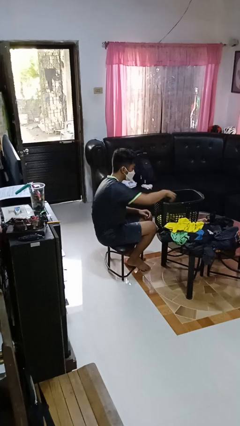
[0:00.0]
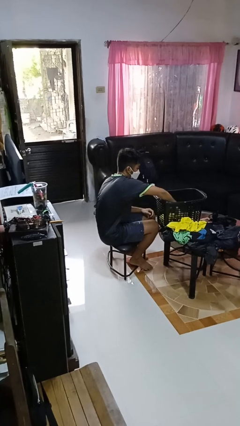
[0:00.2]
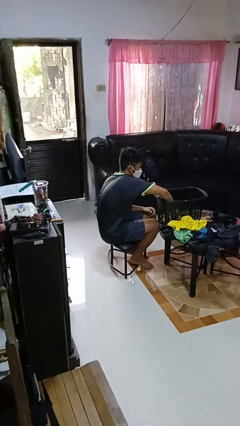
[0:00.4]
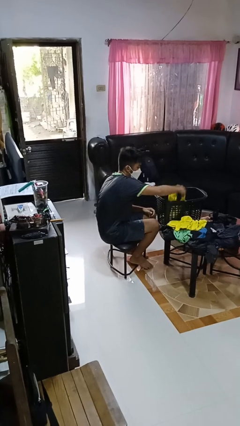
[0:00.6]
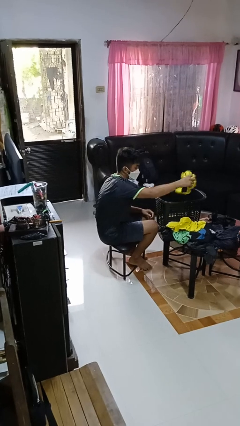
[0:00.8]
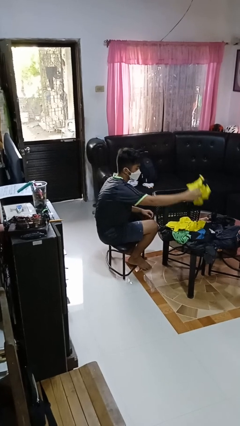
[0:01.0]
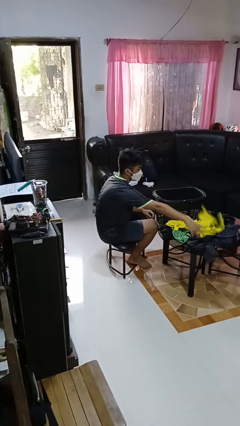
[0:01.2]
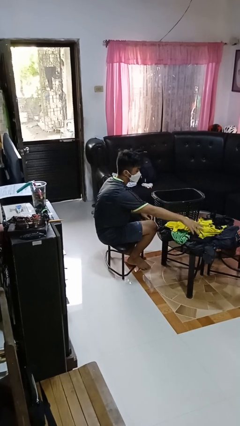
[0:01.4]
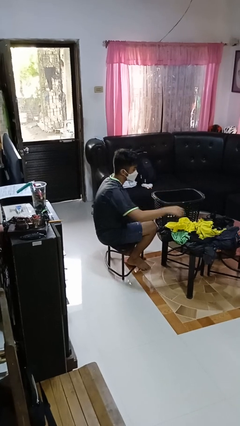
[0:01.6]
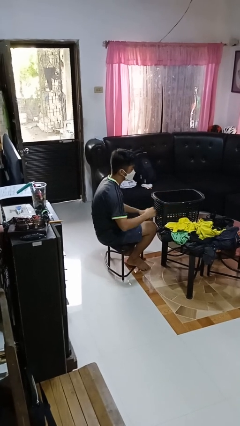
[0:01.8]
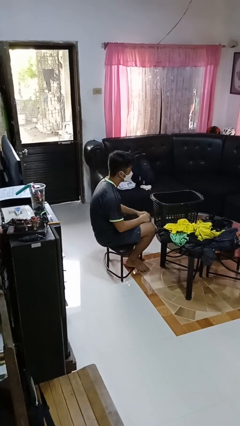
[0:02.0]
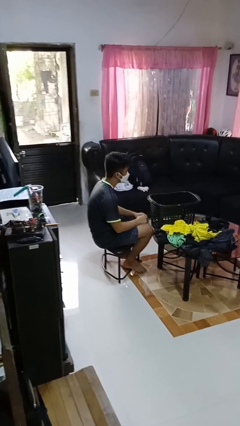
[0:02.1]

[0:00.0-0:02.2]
person takes object from basket

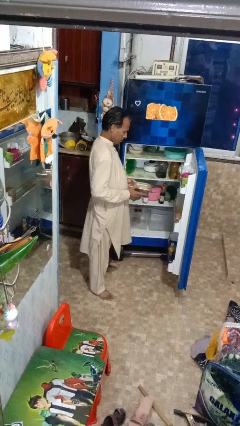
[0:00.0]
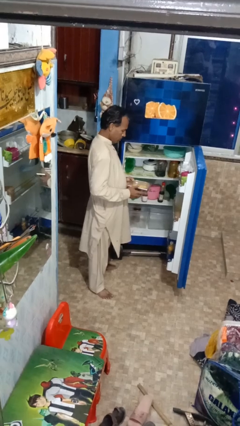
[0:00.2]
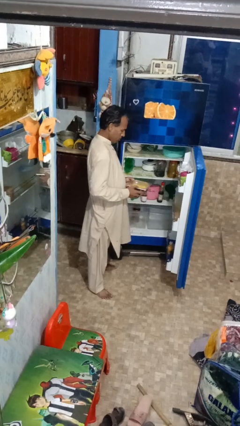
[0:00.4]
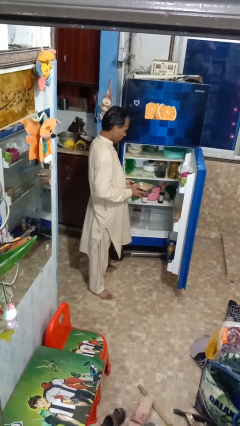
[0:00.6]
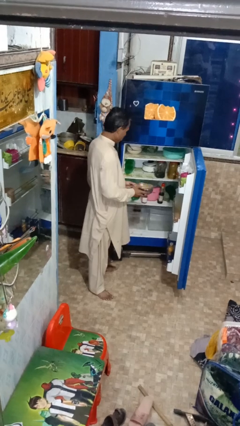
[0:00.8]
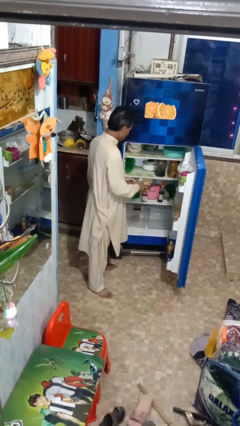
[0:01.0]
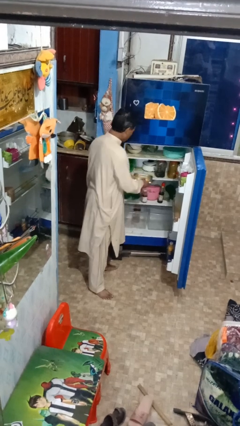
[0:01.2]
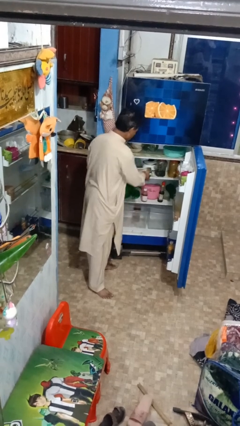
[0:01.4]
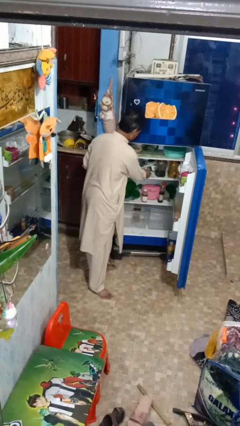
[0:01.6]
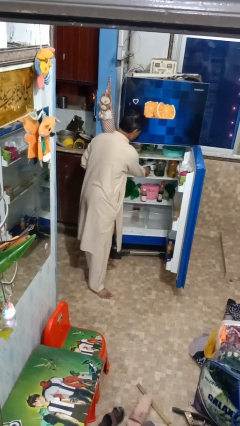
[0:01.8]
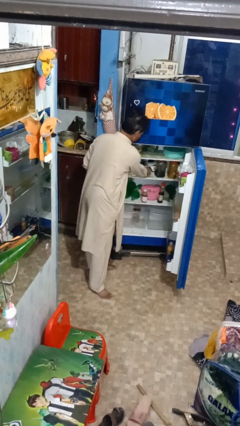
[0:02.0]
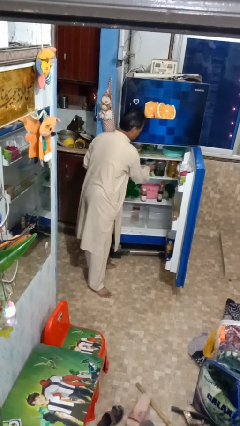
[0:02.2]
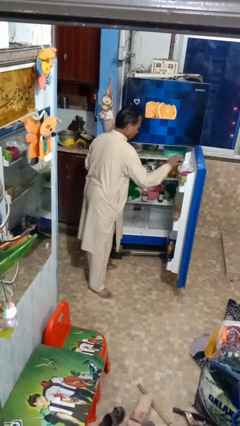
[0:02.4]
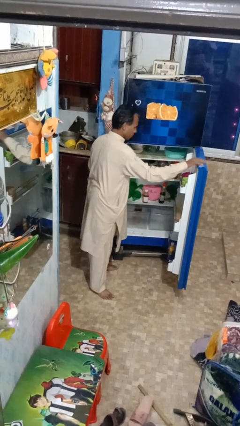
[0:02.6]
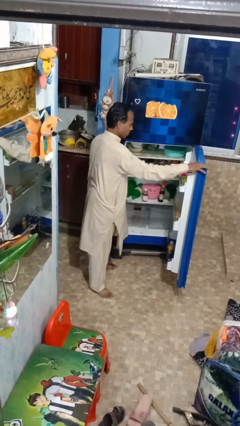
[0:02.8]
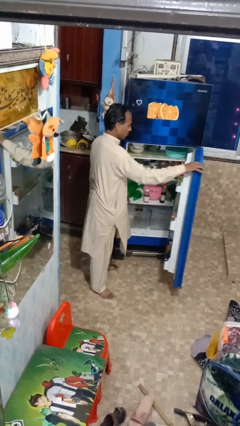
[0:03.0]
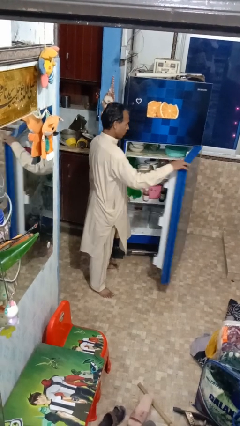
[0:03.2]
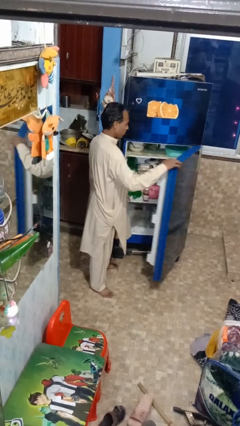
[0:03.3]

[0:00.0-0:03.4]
person takes object from refrigerator

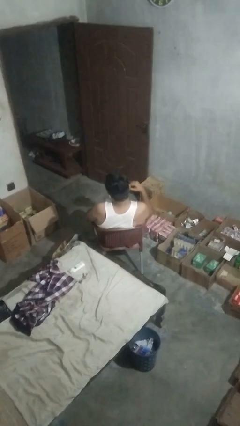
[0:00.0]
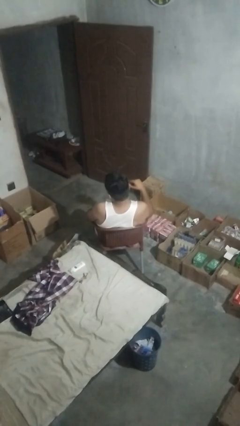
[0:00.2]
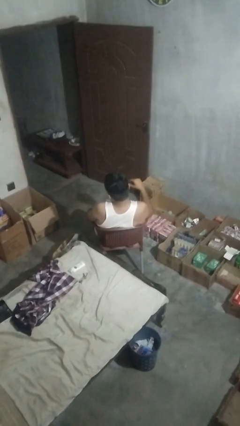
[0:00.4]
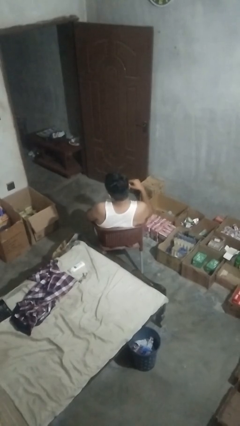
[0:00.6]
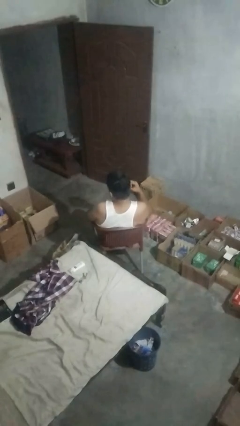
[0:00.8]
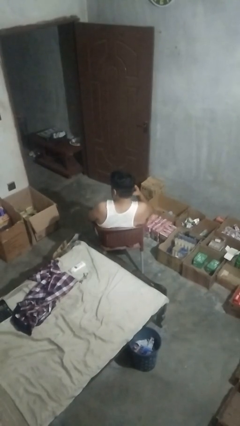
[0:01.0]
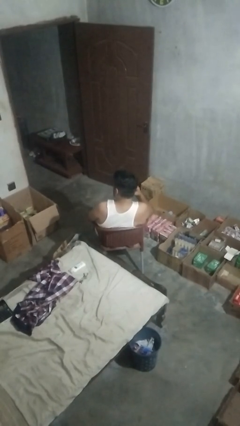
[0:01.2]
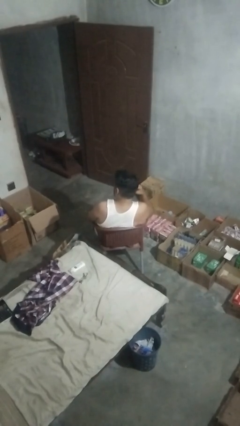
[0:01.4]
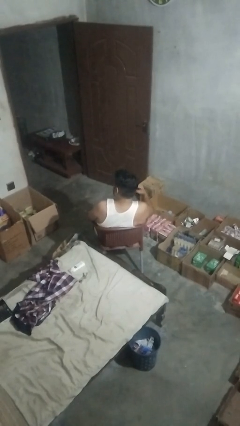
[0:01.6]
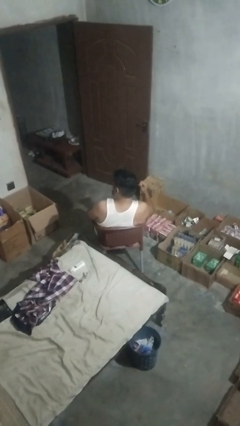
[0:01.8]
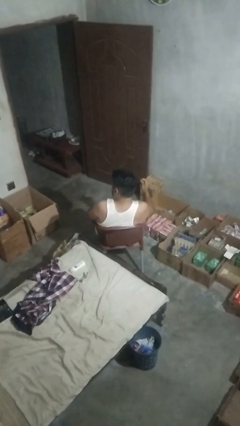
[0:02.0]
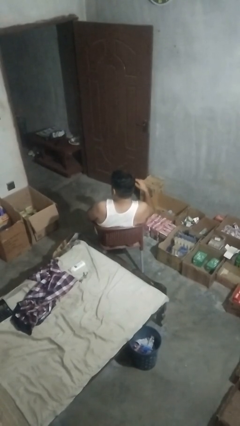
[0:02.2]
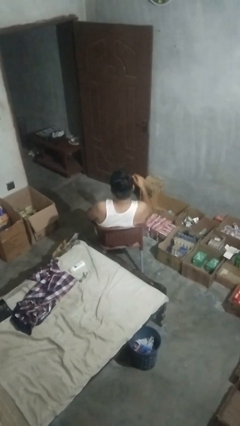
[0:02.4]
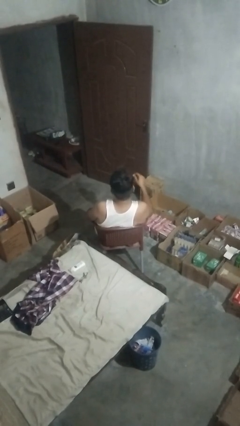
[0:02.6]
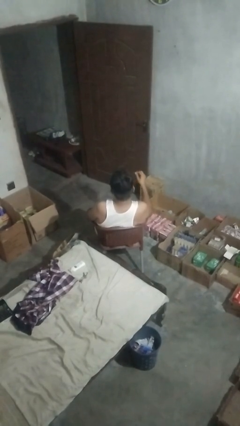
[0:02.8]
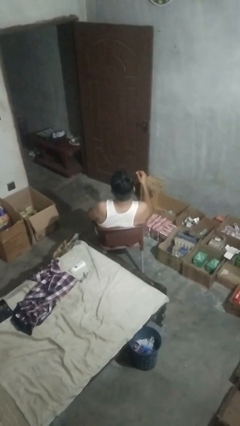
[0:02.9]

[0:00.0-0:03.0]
person takes off earrings

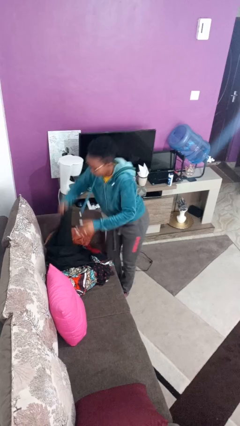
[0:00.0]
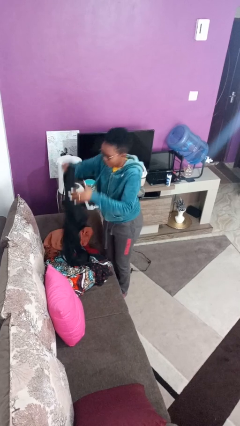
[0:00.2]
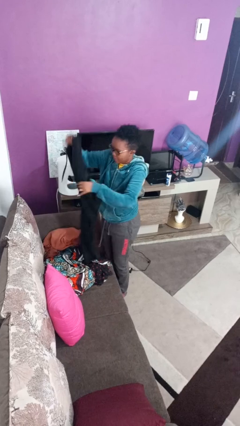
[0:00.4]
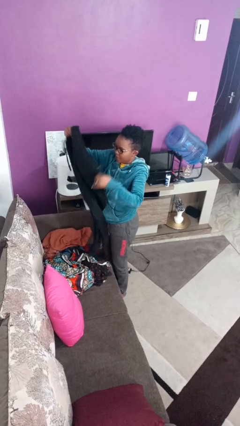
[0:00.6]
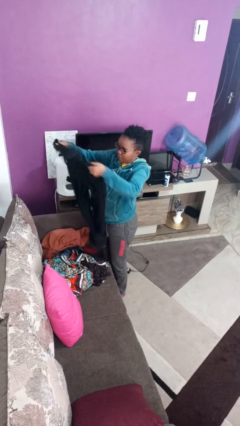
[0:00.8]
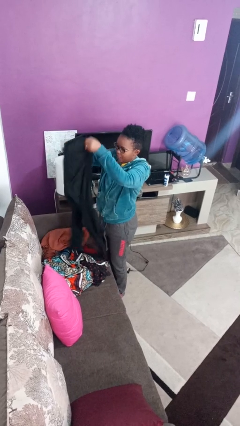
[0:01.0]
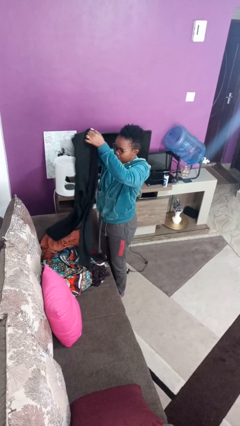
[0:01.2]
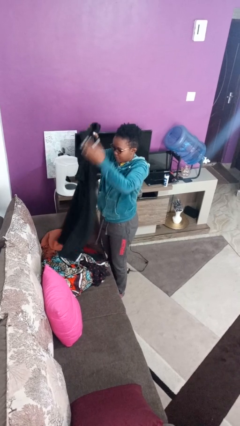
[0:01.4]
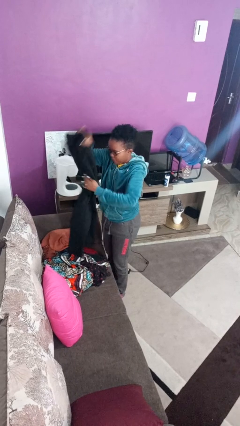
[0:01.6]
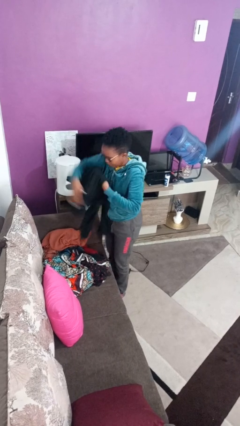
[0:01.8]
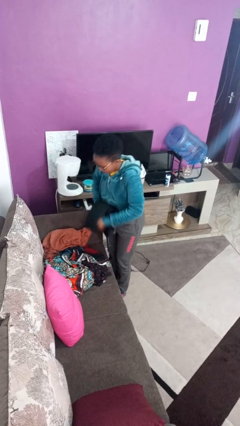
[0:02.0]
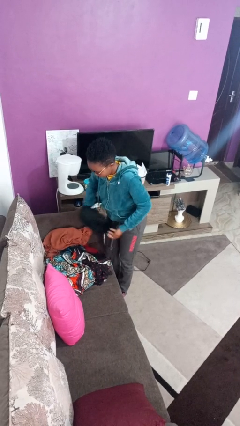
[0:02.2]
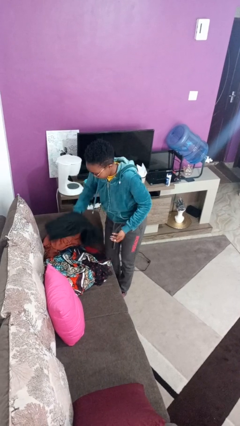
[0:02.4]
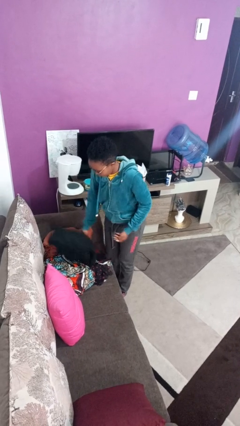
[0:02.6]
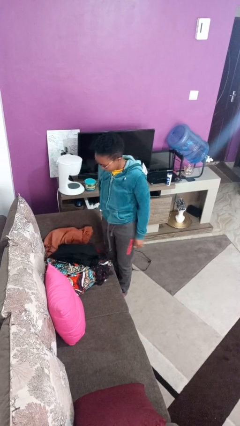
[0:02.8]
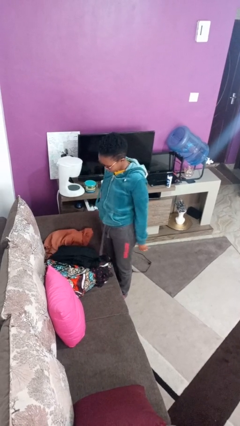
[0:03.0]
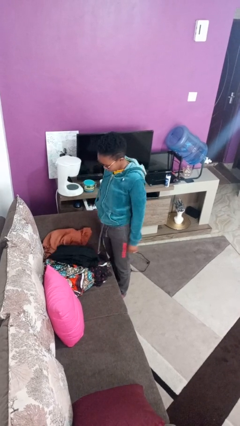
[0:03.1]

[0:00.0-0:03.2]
person folds pants

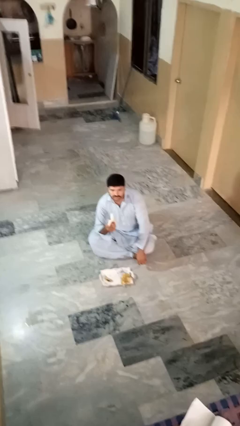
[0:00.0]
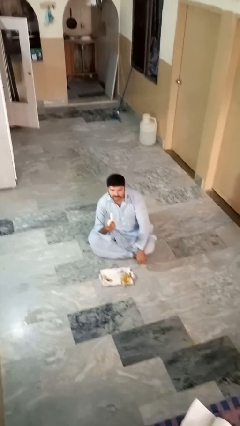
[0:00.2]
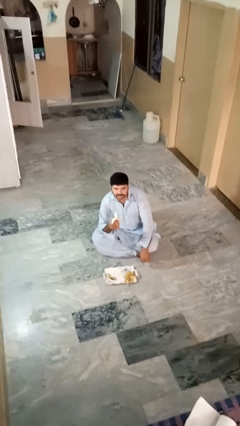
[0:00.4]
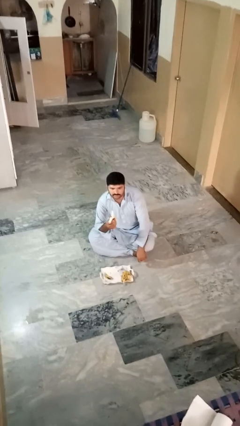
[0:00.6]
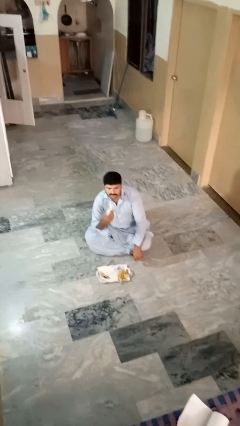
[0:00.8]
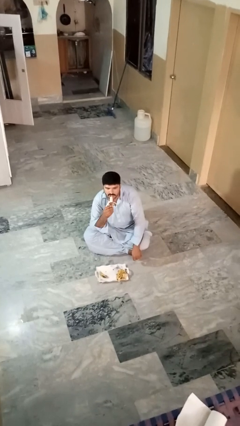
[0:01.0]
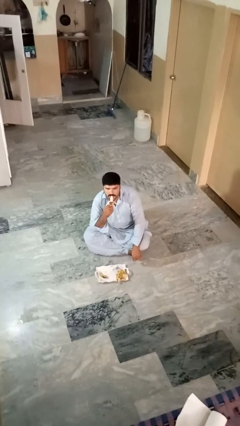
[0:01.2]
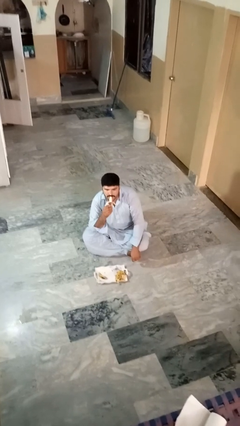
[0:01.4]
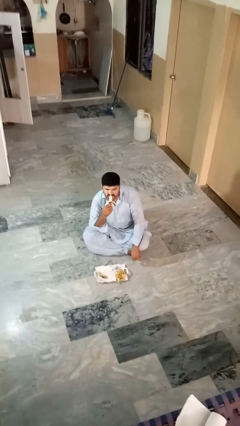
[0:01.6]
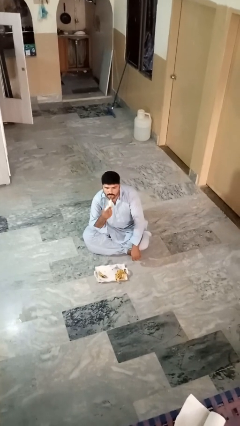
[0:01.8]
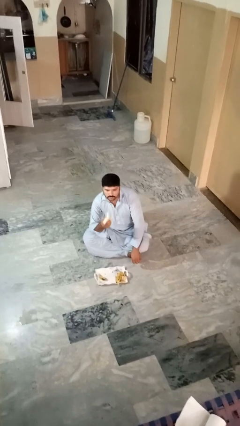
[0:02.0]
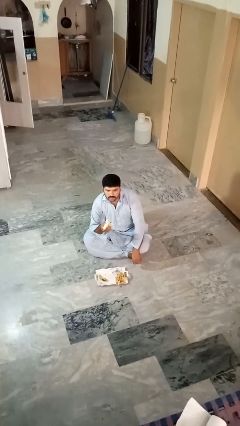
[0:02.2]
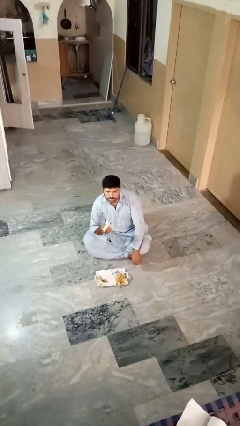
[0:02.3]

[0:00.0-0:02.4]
person eats banana

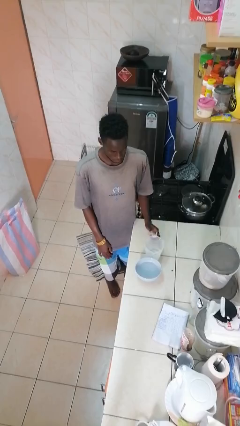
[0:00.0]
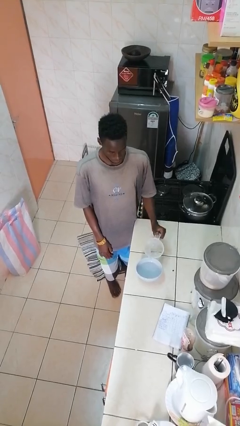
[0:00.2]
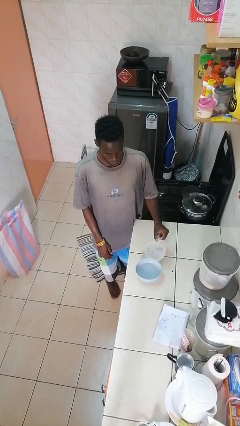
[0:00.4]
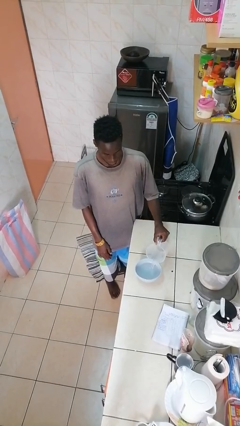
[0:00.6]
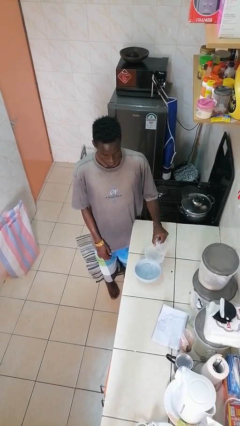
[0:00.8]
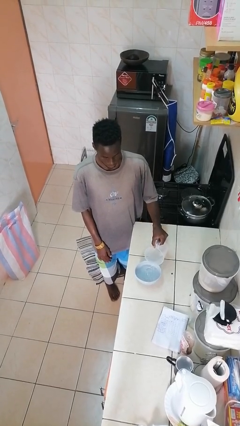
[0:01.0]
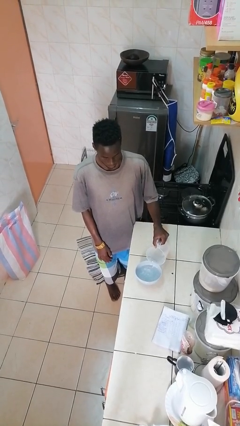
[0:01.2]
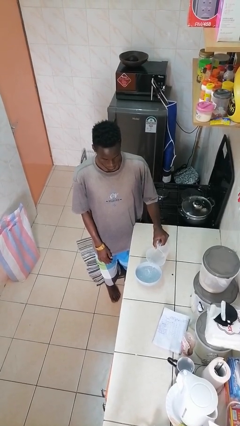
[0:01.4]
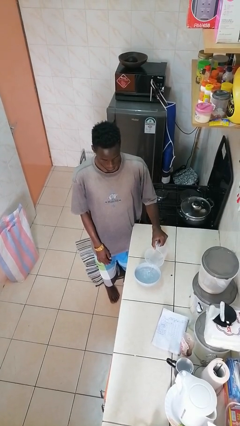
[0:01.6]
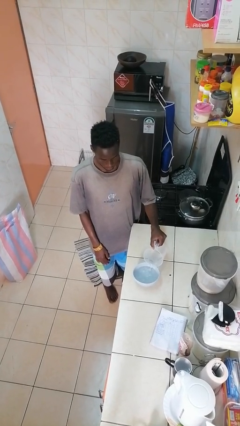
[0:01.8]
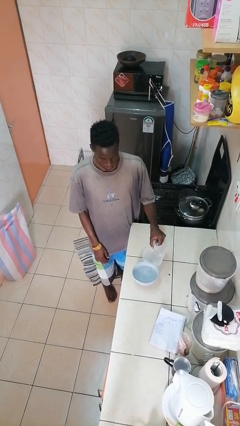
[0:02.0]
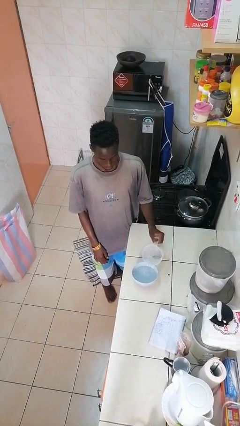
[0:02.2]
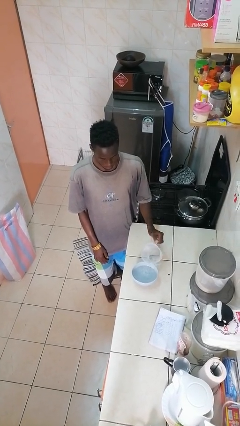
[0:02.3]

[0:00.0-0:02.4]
person pours into bowl

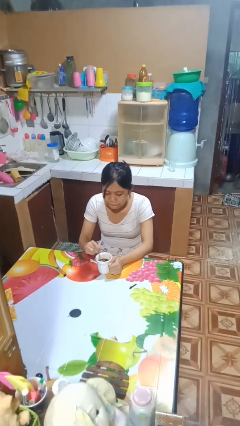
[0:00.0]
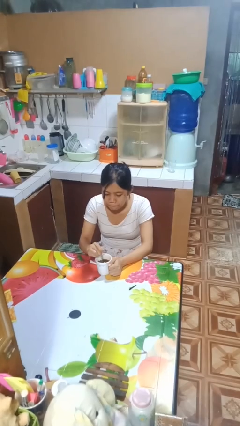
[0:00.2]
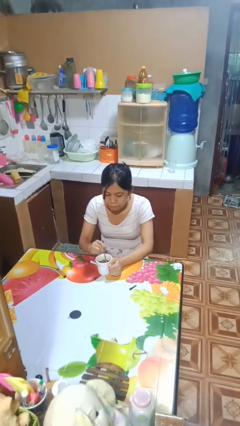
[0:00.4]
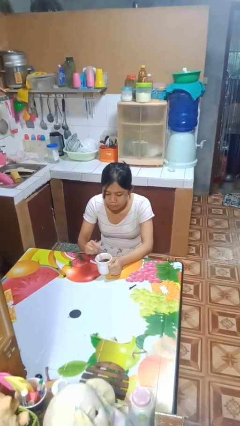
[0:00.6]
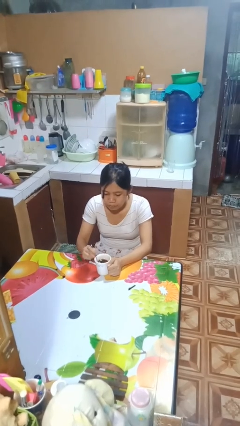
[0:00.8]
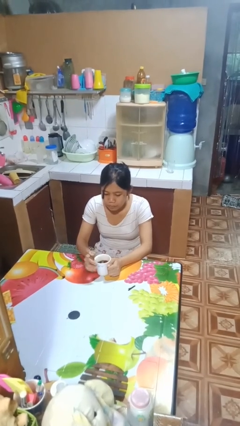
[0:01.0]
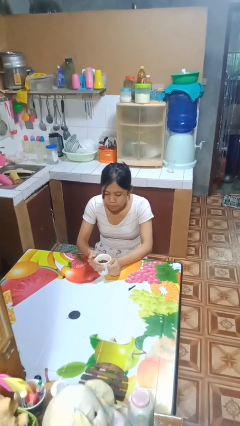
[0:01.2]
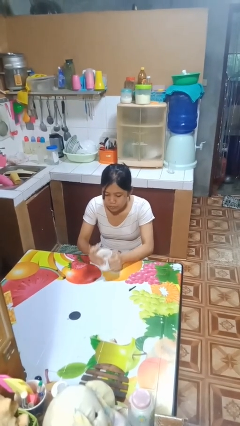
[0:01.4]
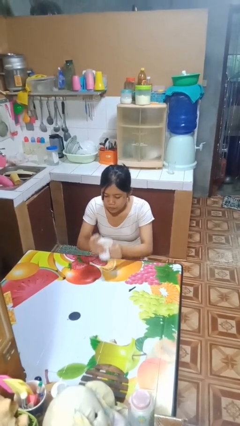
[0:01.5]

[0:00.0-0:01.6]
person stirs mug
